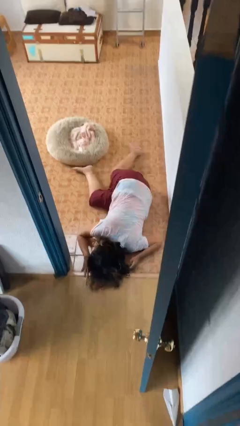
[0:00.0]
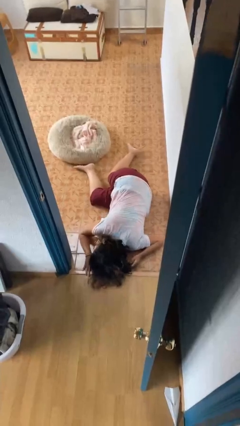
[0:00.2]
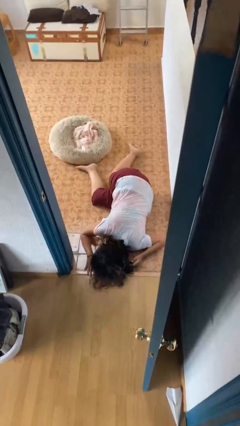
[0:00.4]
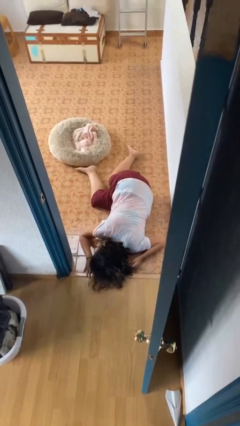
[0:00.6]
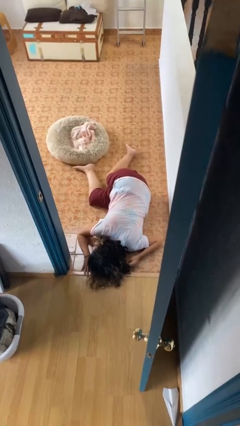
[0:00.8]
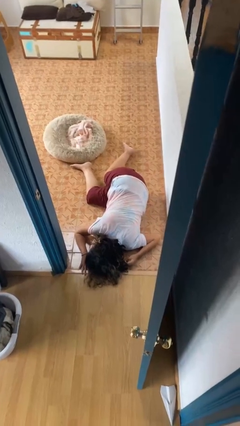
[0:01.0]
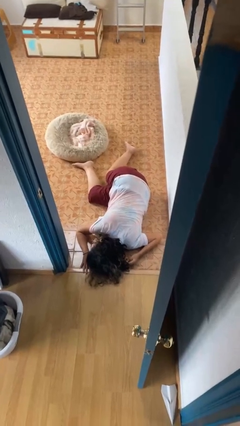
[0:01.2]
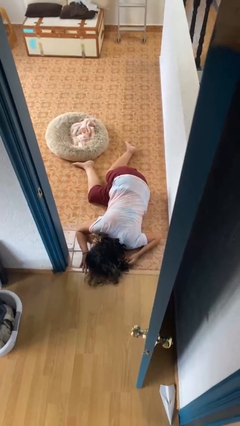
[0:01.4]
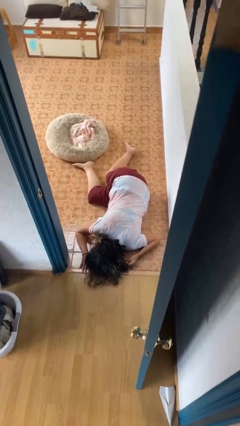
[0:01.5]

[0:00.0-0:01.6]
person lies down on floor

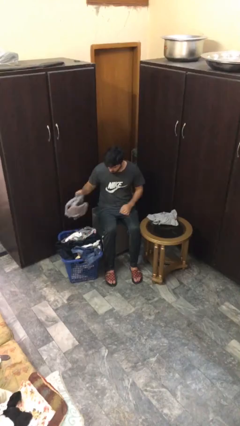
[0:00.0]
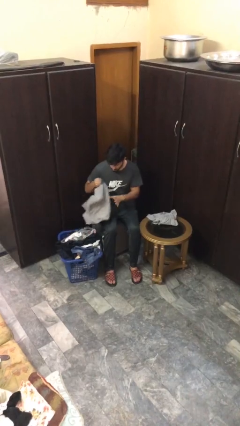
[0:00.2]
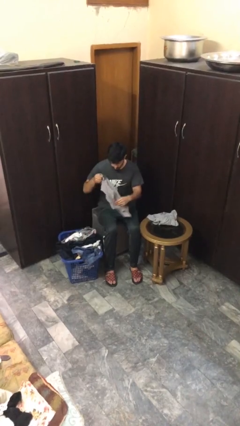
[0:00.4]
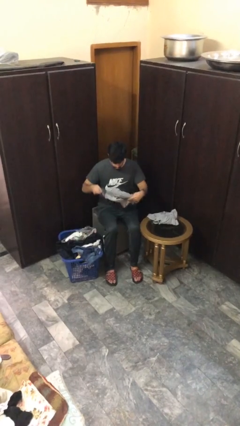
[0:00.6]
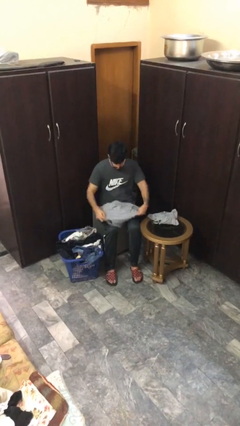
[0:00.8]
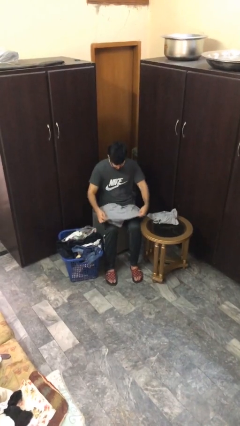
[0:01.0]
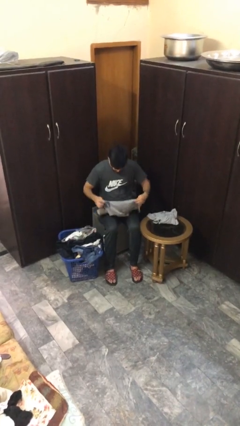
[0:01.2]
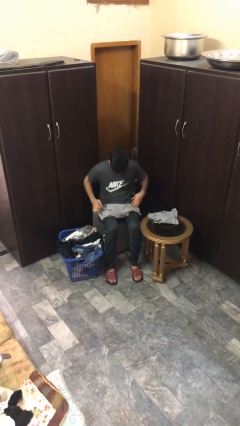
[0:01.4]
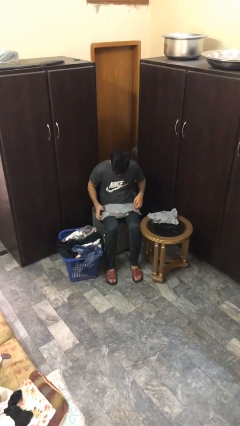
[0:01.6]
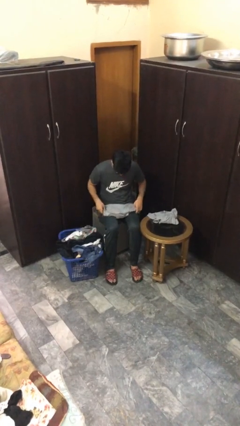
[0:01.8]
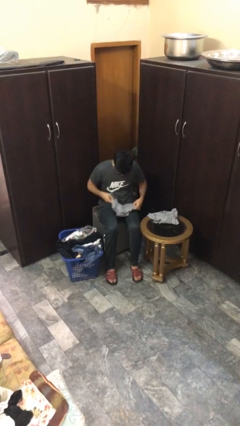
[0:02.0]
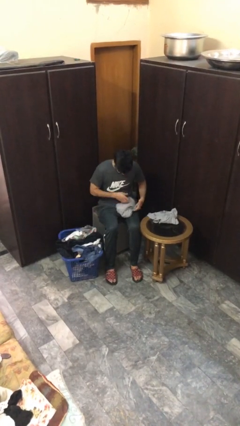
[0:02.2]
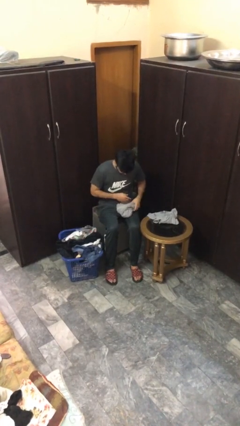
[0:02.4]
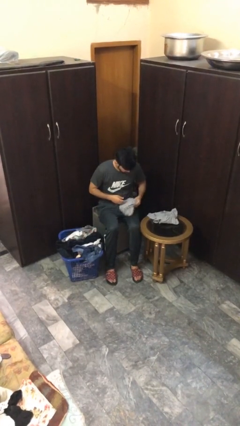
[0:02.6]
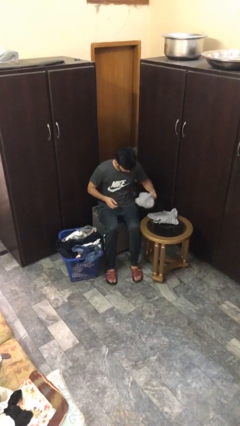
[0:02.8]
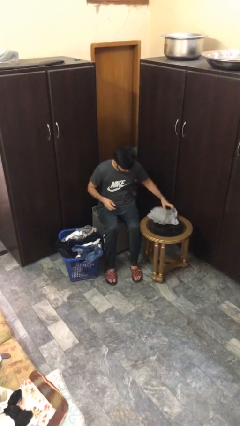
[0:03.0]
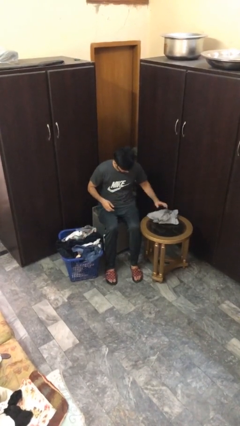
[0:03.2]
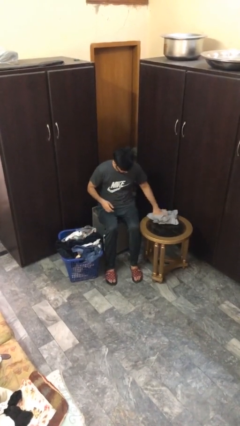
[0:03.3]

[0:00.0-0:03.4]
person folds shirt

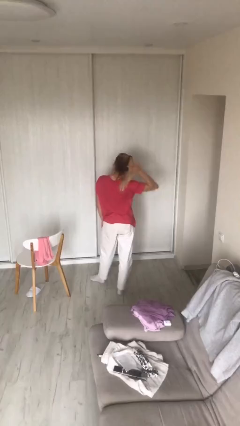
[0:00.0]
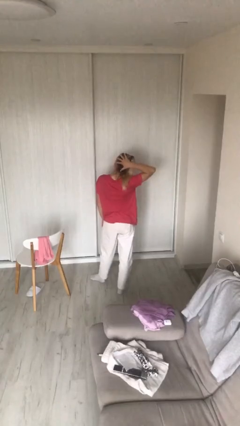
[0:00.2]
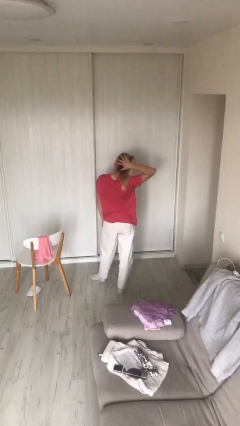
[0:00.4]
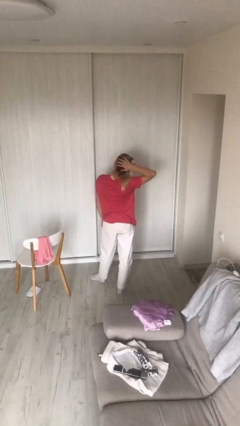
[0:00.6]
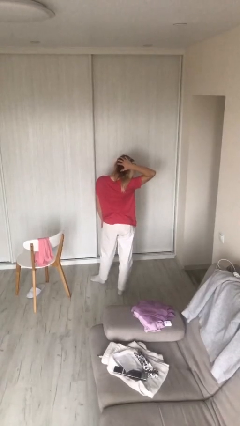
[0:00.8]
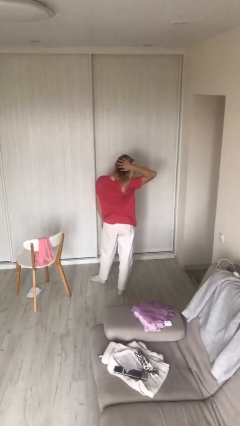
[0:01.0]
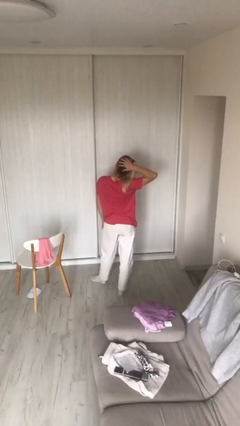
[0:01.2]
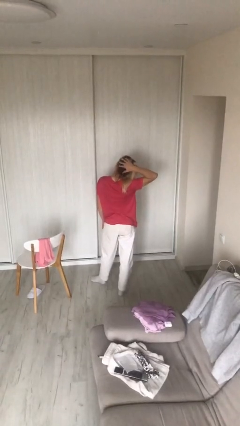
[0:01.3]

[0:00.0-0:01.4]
person pats head

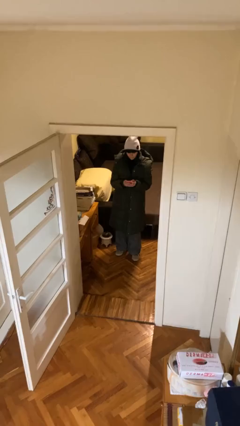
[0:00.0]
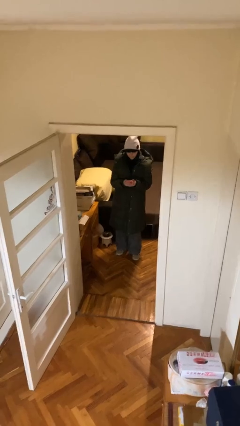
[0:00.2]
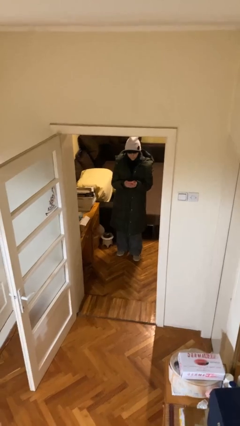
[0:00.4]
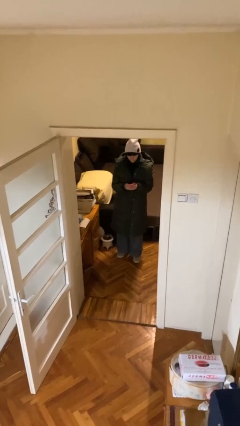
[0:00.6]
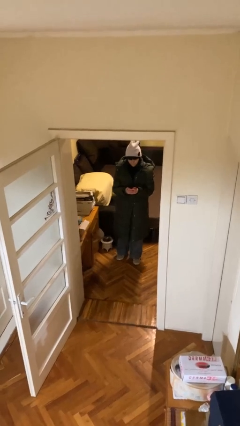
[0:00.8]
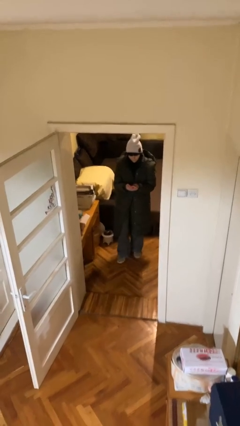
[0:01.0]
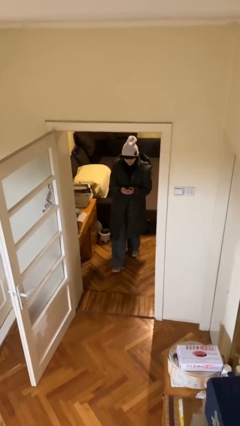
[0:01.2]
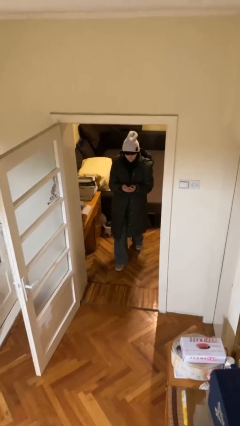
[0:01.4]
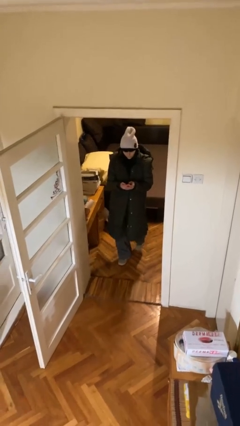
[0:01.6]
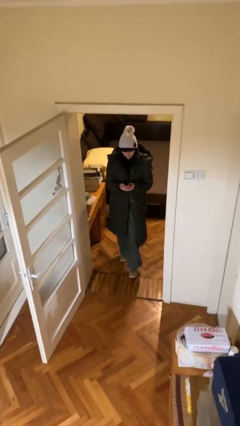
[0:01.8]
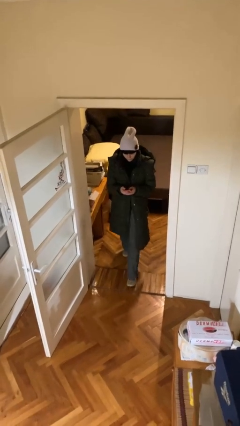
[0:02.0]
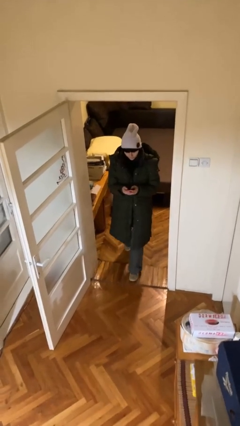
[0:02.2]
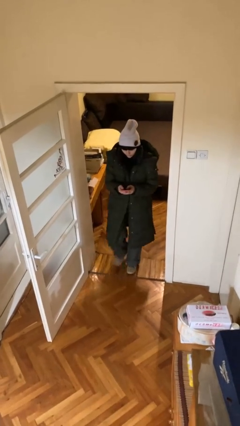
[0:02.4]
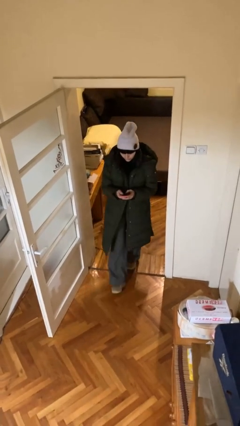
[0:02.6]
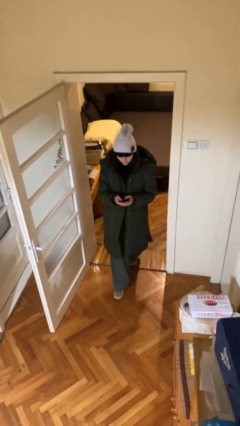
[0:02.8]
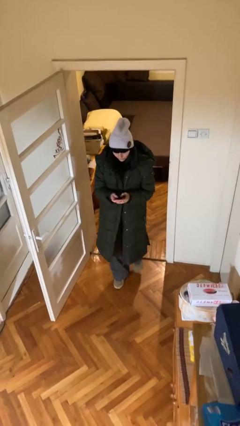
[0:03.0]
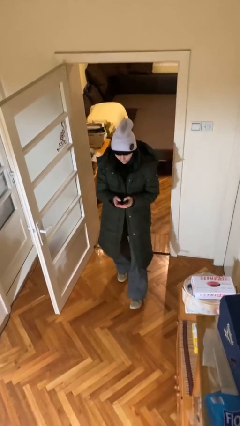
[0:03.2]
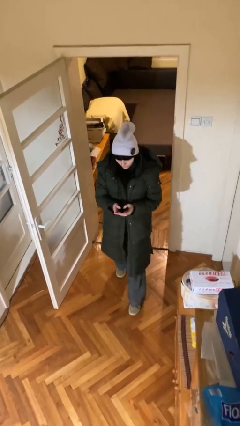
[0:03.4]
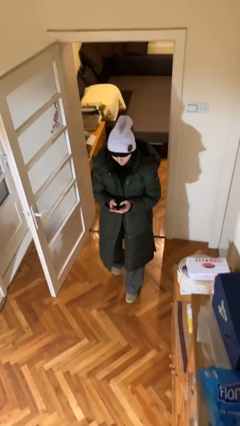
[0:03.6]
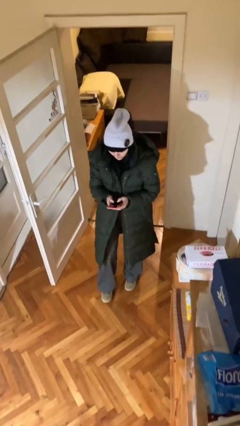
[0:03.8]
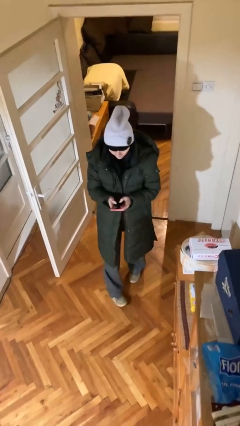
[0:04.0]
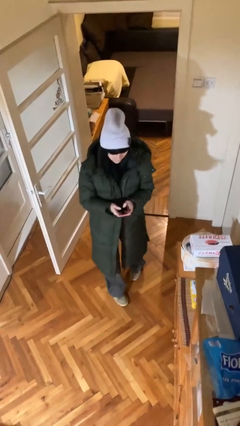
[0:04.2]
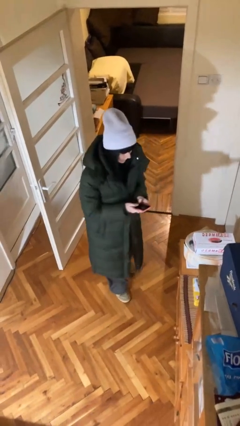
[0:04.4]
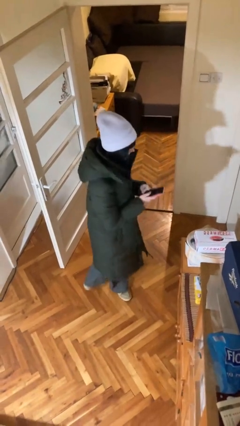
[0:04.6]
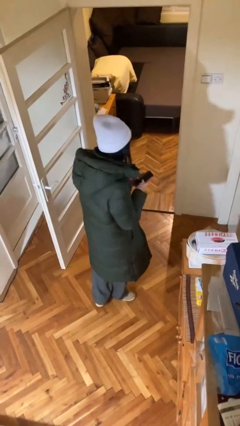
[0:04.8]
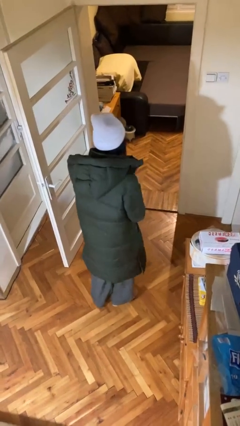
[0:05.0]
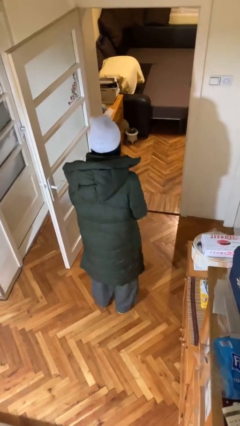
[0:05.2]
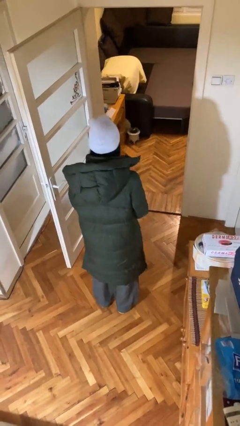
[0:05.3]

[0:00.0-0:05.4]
person enters scene through structure

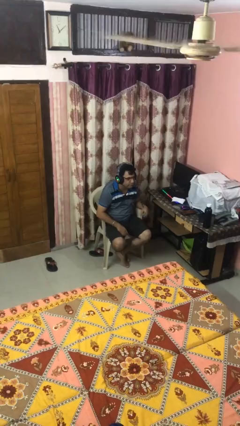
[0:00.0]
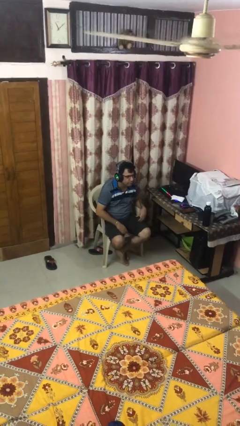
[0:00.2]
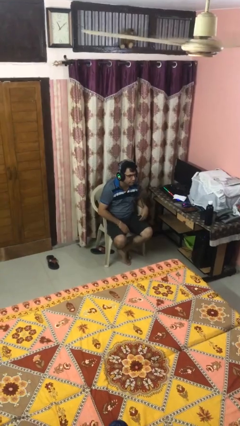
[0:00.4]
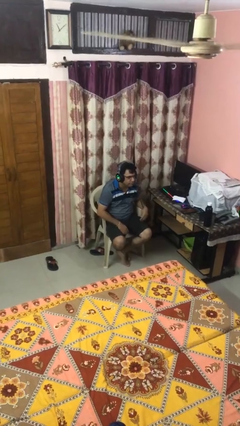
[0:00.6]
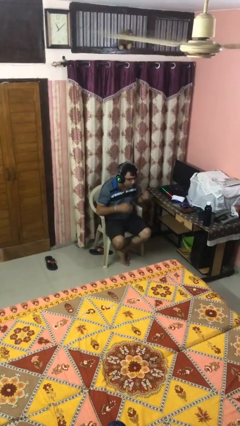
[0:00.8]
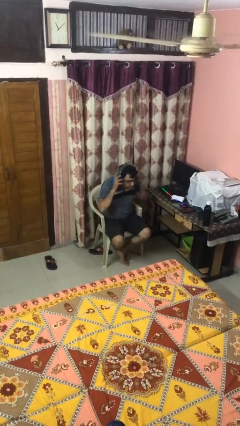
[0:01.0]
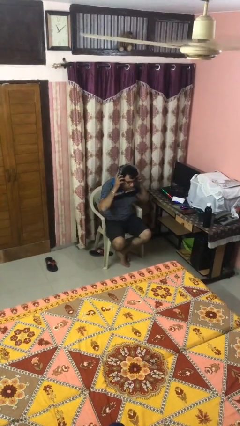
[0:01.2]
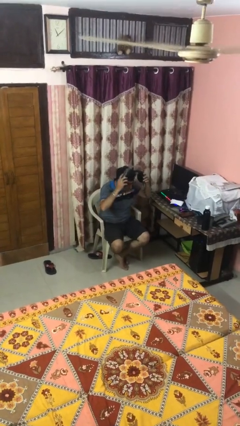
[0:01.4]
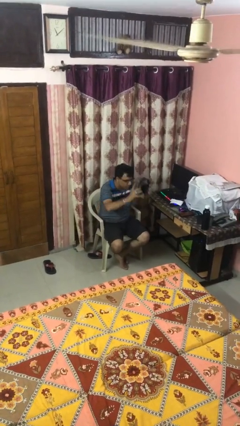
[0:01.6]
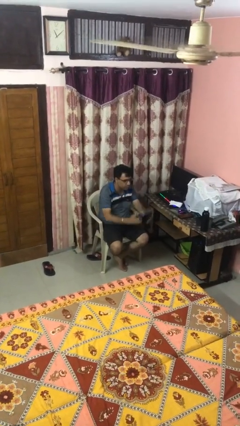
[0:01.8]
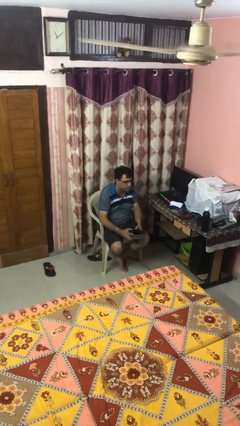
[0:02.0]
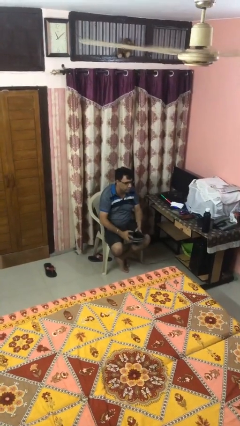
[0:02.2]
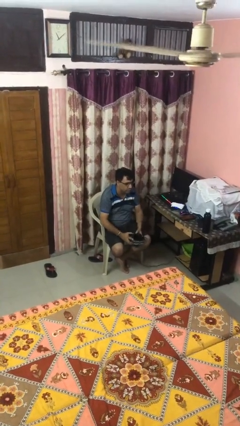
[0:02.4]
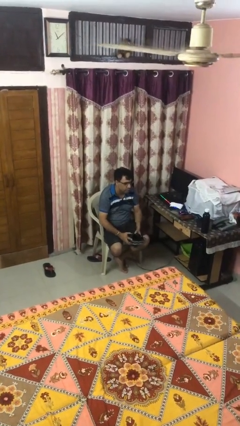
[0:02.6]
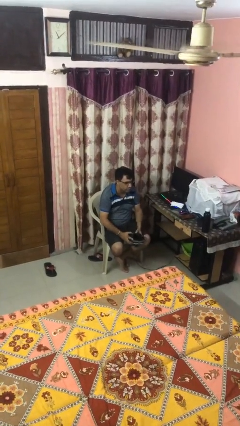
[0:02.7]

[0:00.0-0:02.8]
person takes off headphones

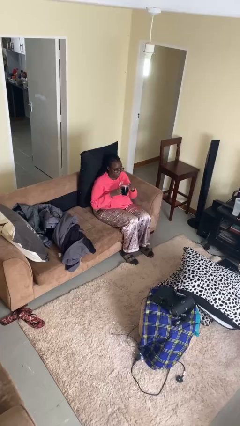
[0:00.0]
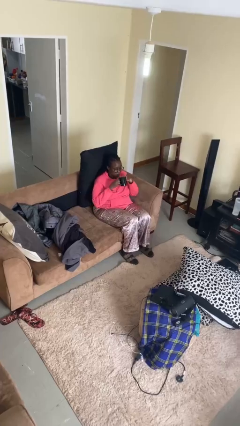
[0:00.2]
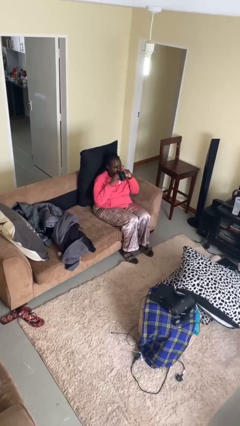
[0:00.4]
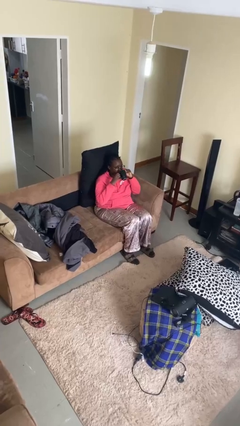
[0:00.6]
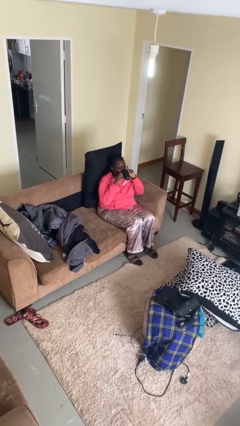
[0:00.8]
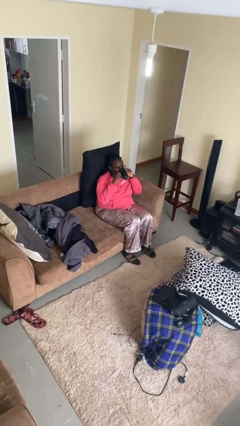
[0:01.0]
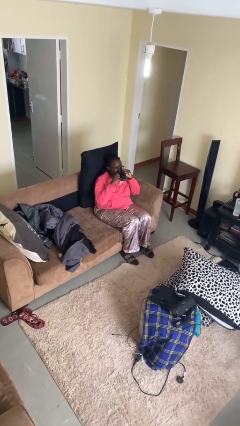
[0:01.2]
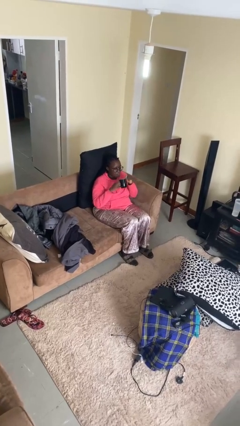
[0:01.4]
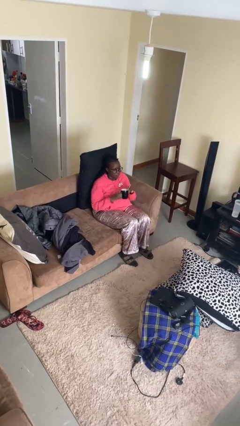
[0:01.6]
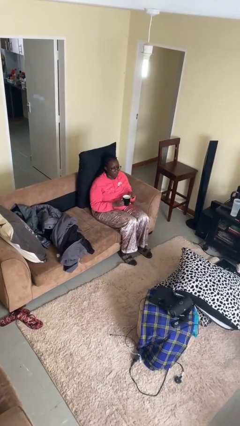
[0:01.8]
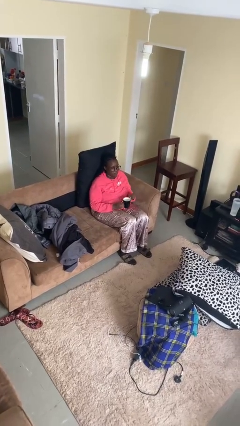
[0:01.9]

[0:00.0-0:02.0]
person drinks from mug

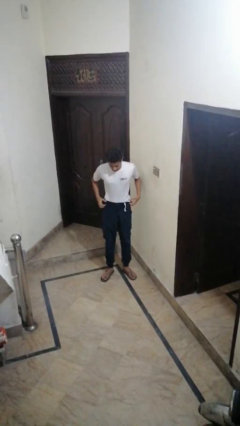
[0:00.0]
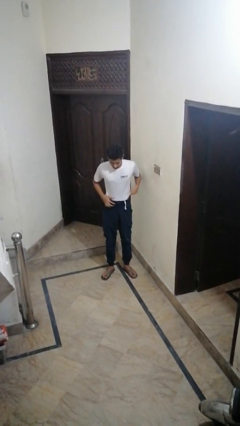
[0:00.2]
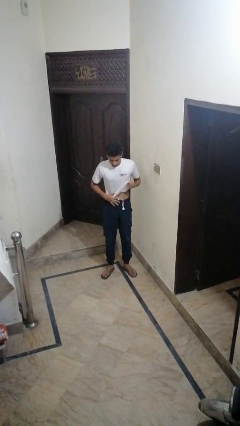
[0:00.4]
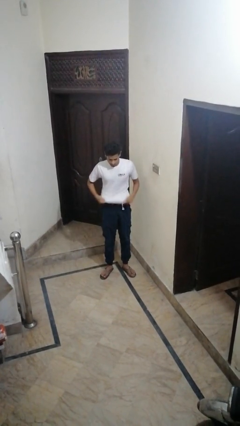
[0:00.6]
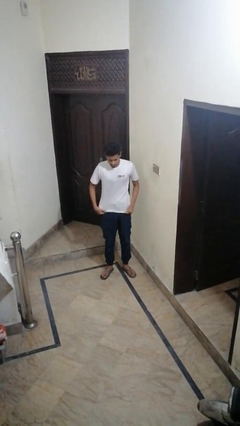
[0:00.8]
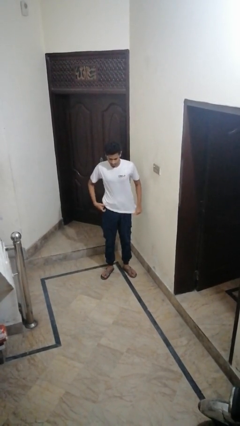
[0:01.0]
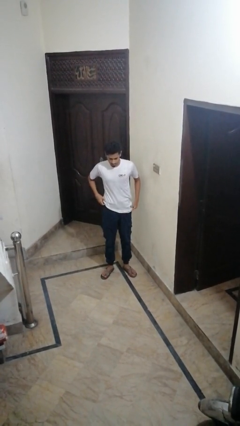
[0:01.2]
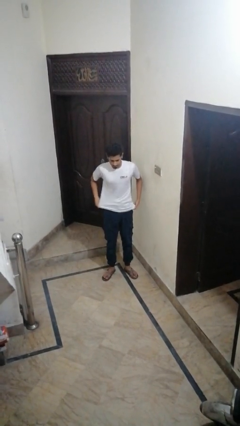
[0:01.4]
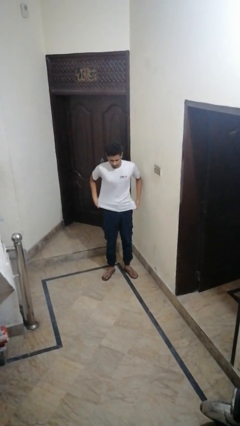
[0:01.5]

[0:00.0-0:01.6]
person untucks shirt
